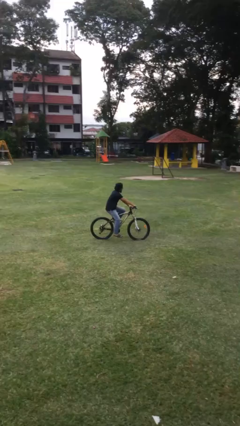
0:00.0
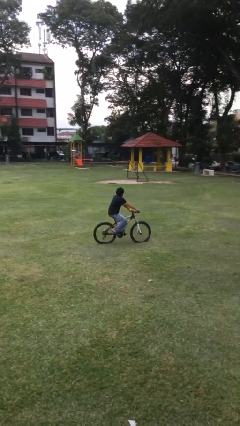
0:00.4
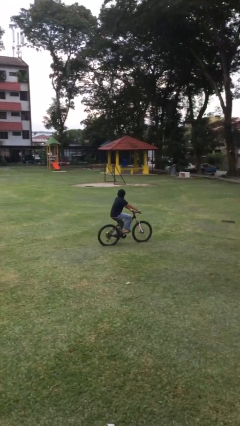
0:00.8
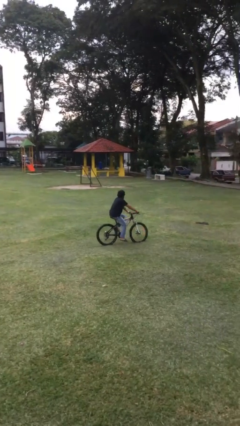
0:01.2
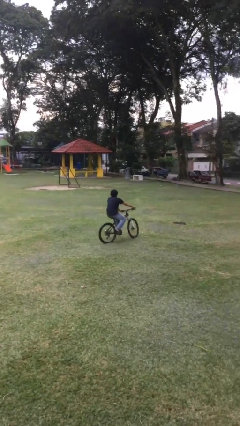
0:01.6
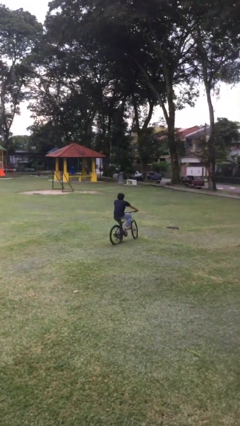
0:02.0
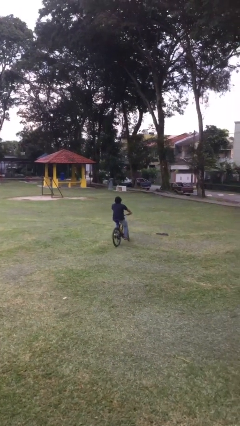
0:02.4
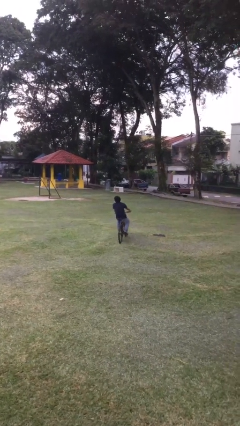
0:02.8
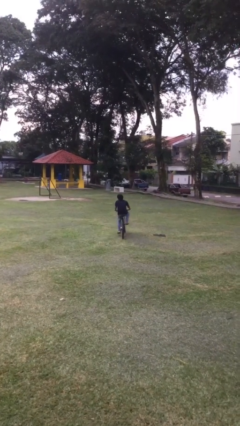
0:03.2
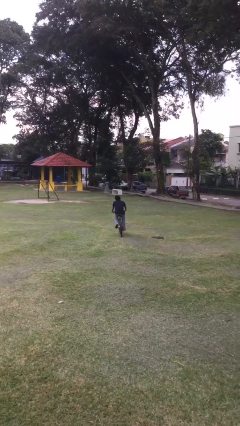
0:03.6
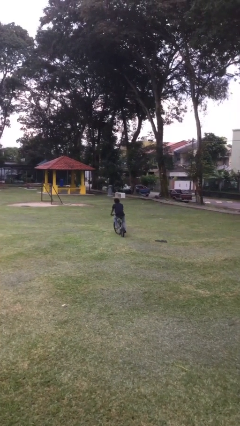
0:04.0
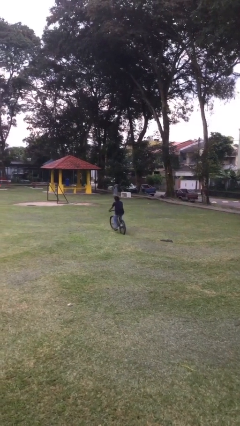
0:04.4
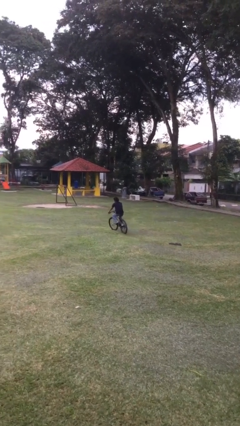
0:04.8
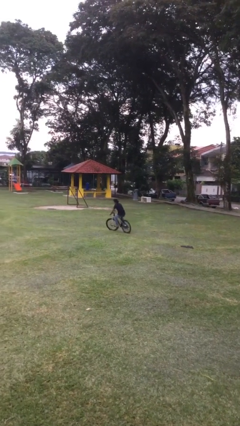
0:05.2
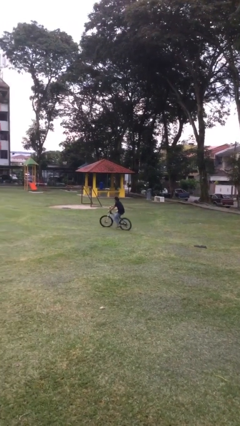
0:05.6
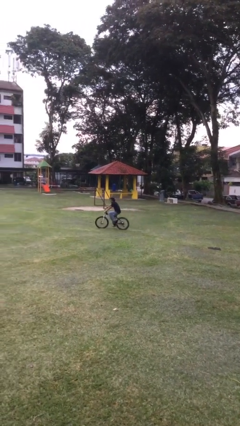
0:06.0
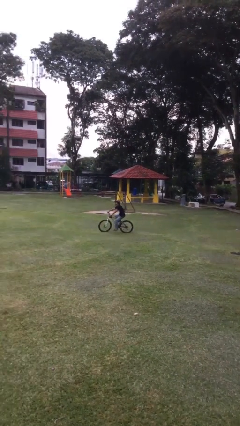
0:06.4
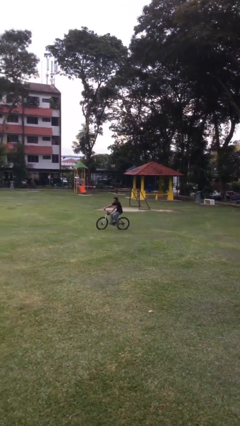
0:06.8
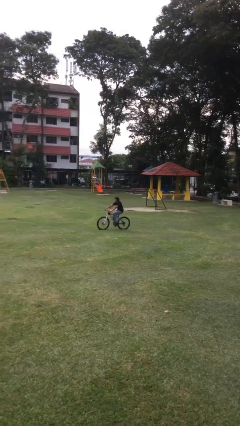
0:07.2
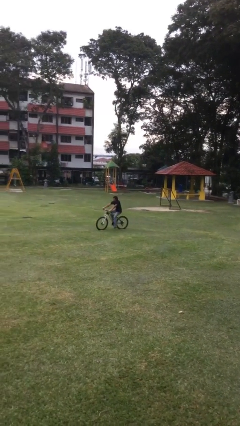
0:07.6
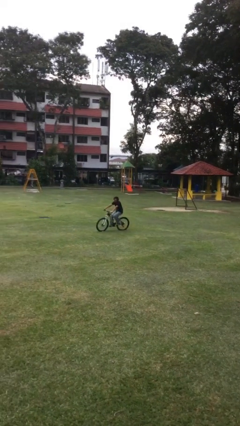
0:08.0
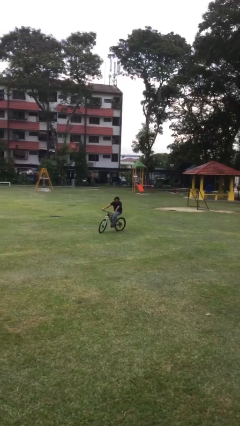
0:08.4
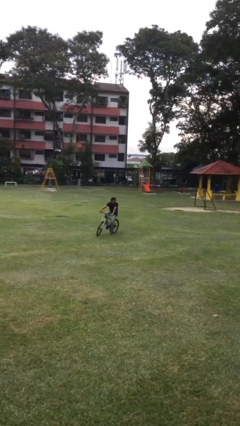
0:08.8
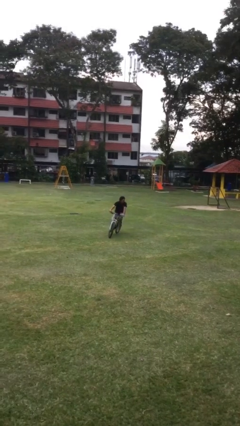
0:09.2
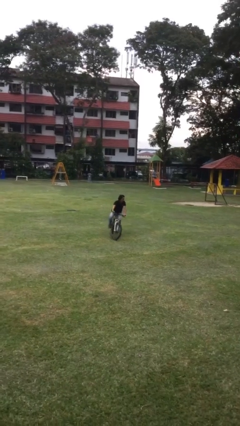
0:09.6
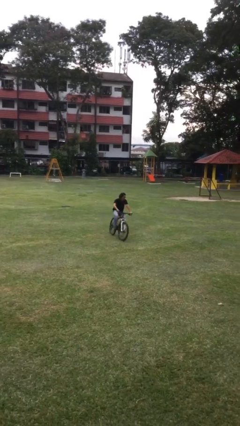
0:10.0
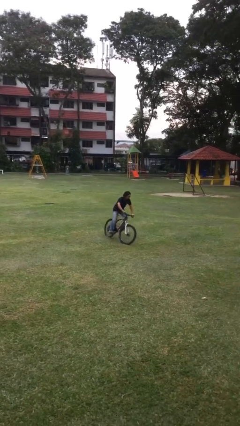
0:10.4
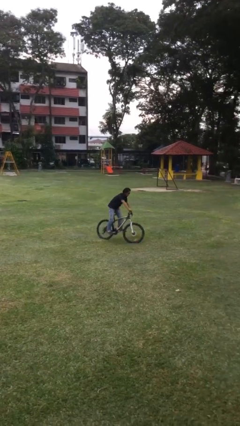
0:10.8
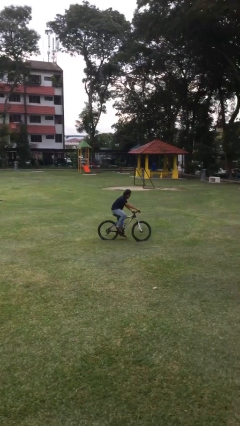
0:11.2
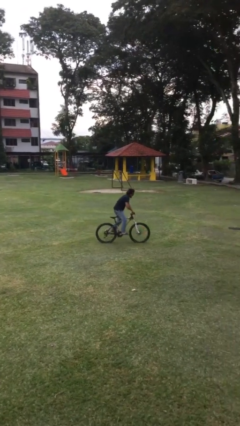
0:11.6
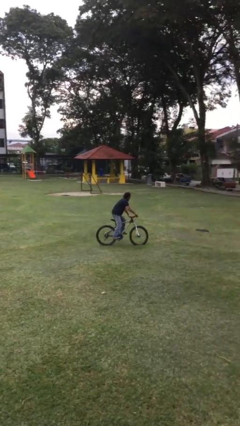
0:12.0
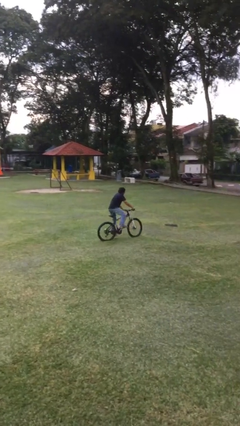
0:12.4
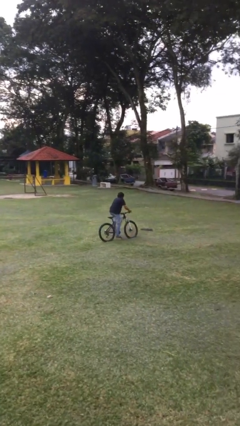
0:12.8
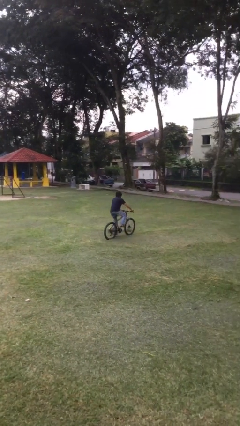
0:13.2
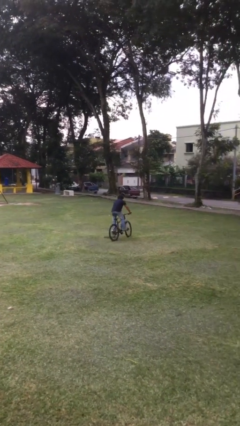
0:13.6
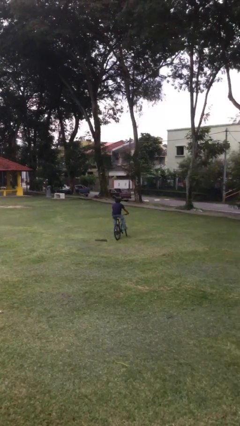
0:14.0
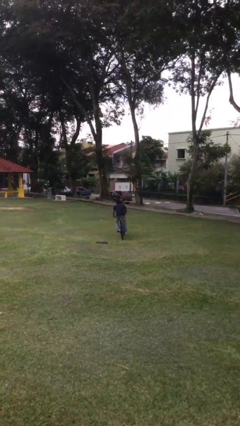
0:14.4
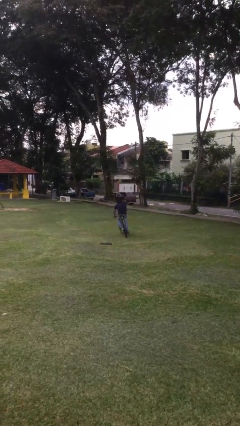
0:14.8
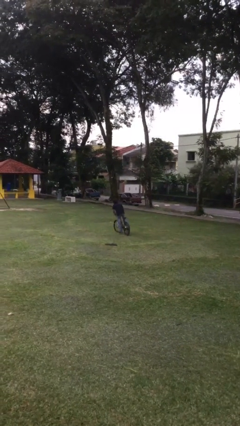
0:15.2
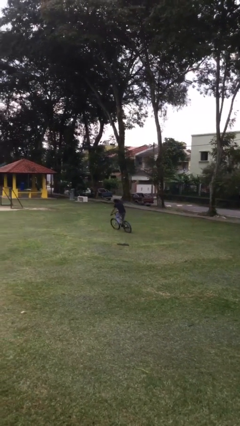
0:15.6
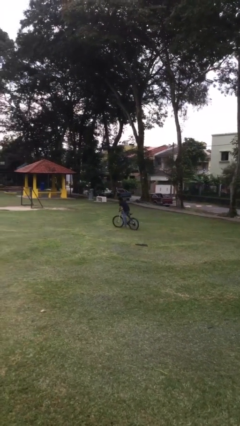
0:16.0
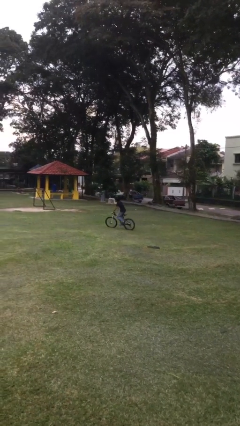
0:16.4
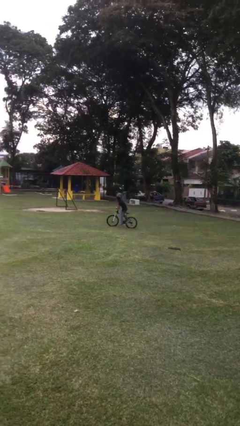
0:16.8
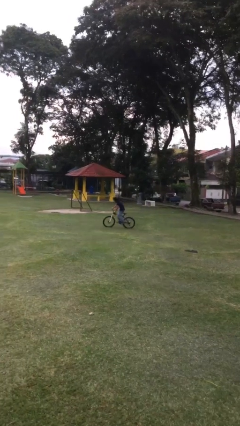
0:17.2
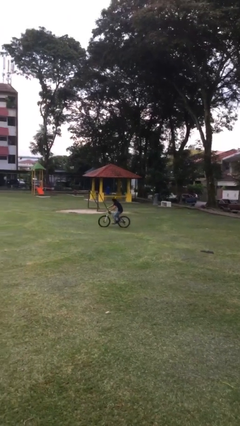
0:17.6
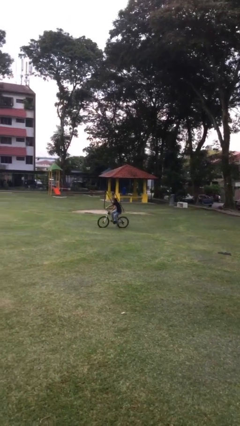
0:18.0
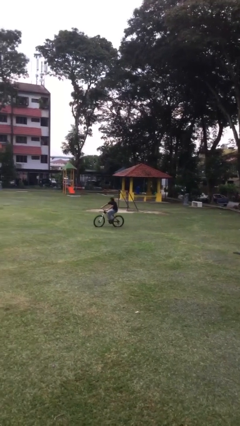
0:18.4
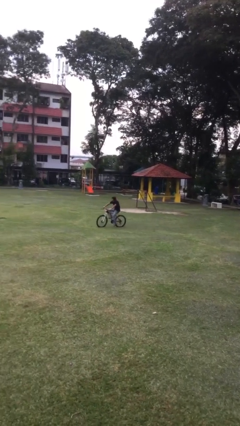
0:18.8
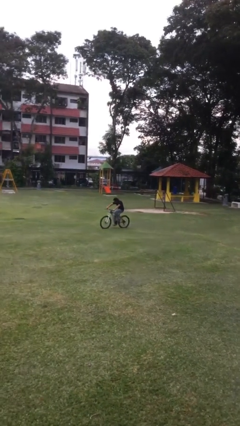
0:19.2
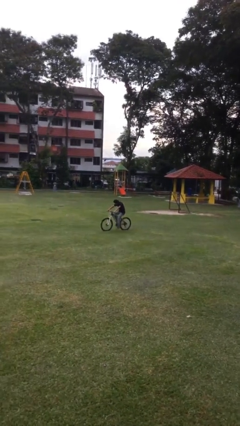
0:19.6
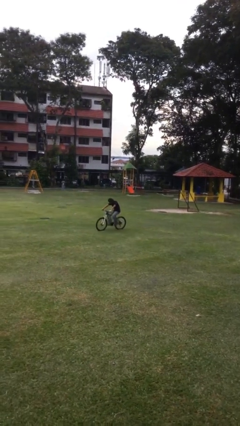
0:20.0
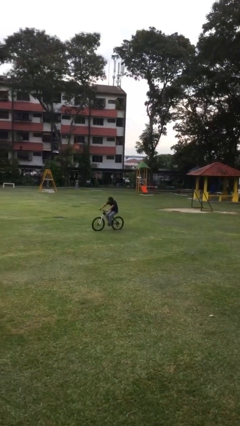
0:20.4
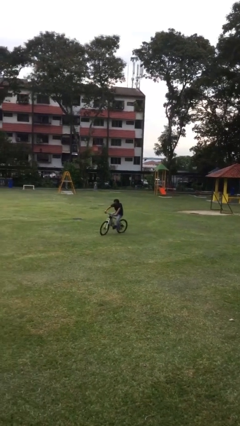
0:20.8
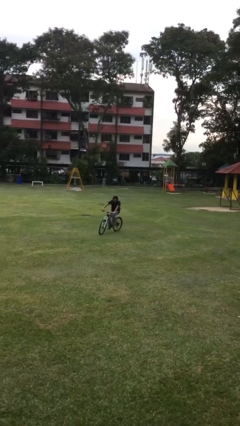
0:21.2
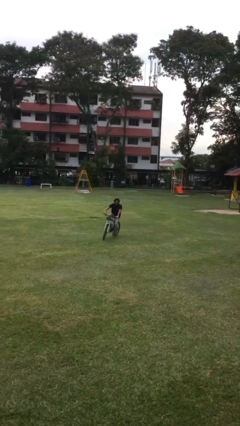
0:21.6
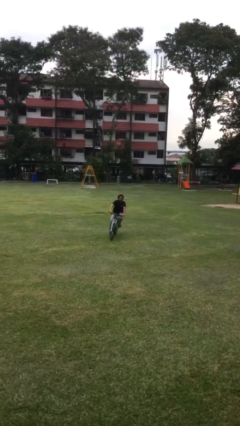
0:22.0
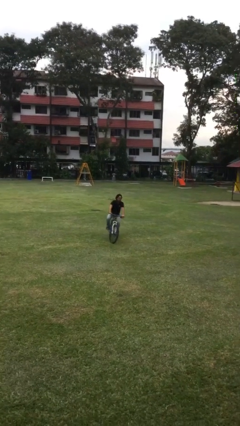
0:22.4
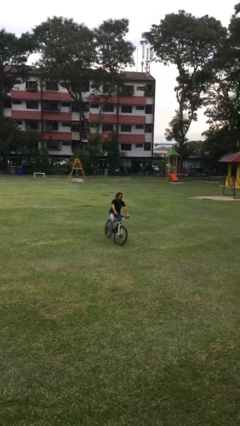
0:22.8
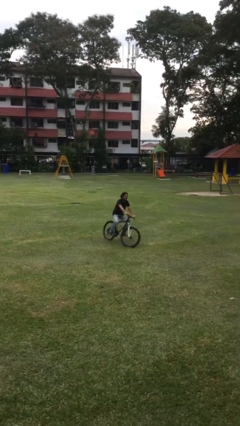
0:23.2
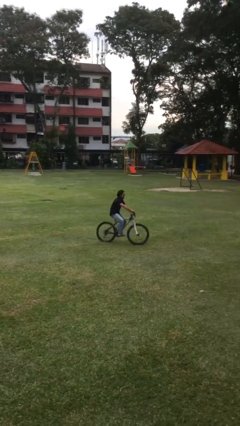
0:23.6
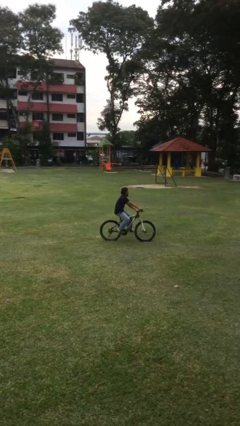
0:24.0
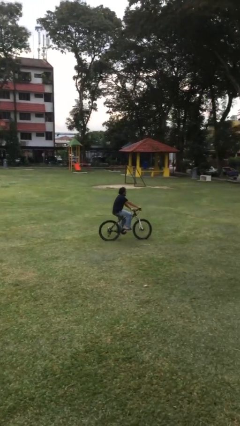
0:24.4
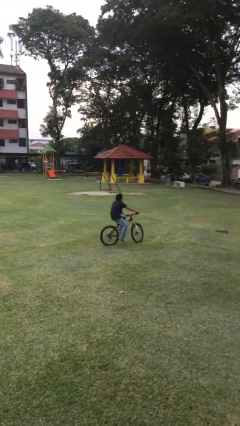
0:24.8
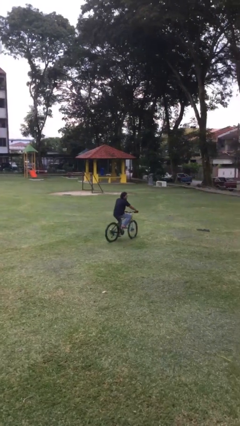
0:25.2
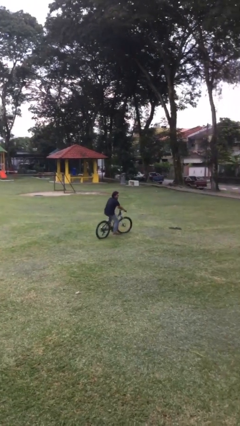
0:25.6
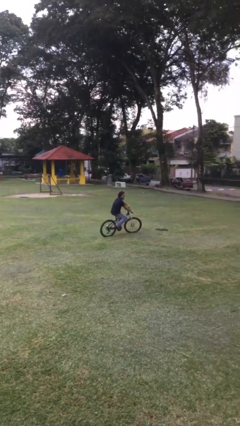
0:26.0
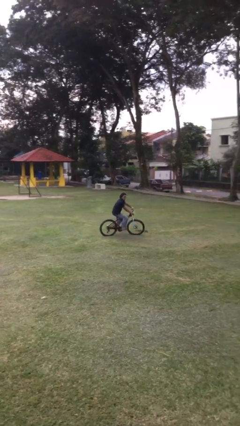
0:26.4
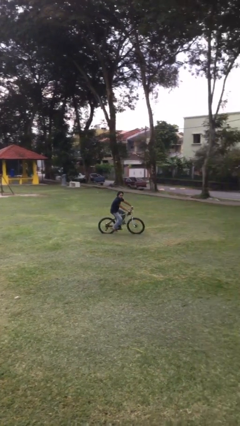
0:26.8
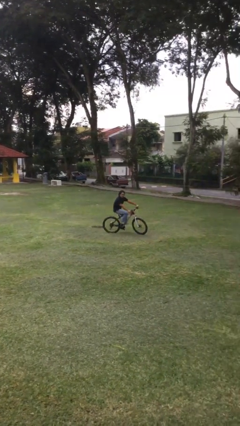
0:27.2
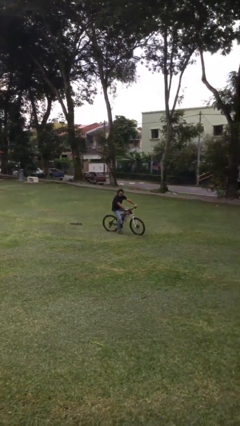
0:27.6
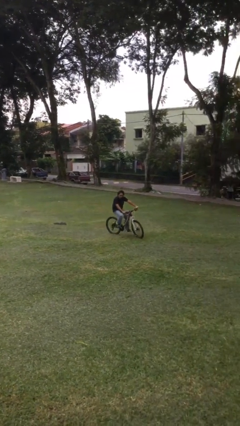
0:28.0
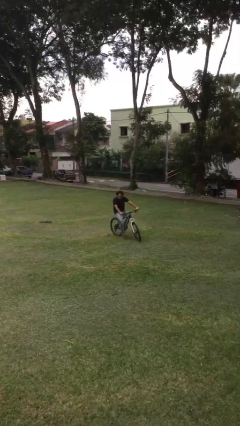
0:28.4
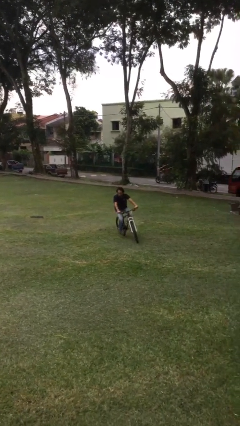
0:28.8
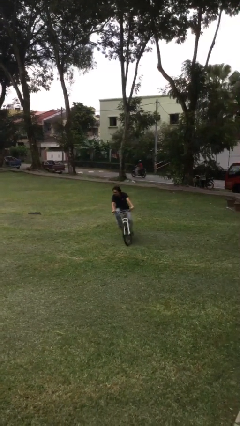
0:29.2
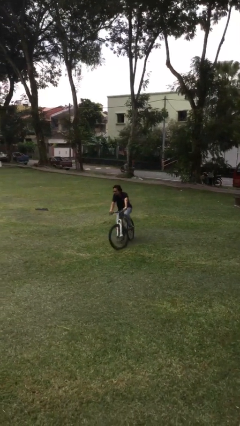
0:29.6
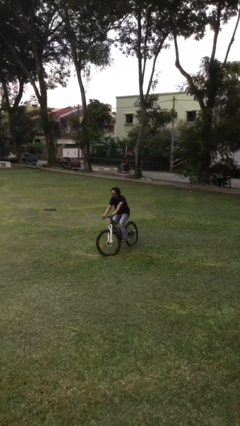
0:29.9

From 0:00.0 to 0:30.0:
person rides bicycle

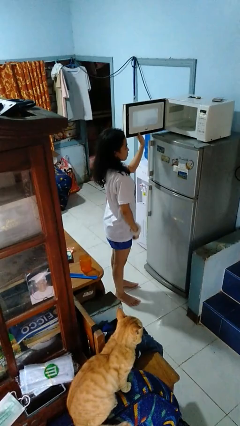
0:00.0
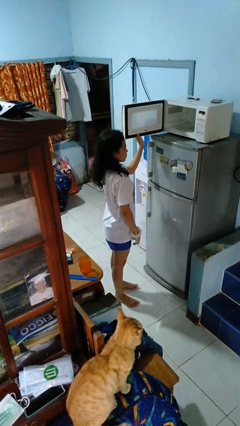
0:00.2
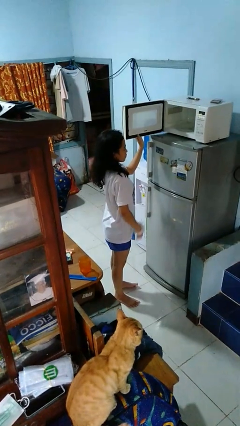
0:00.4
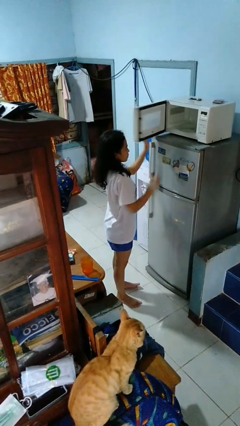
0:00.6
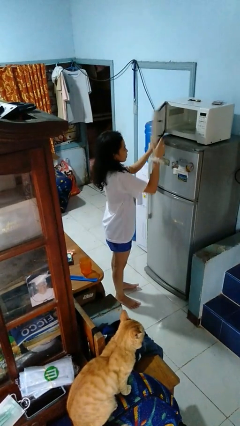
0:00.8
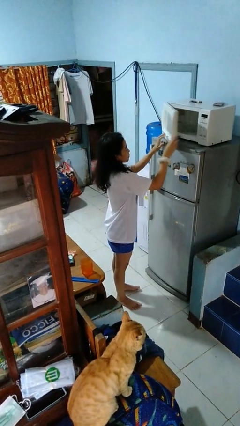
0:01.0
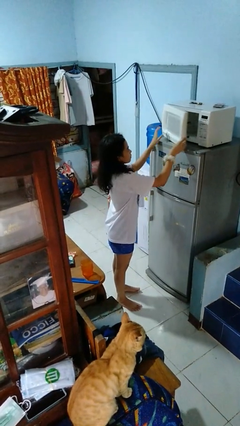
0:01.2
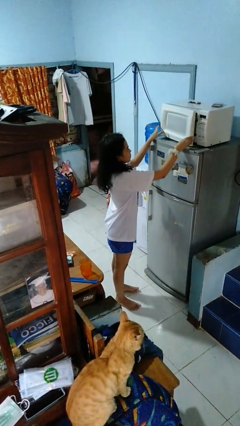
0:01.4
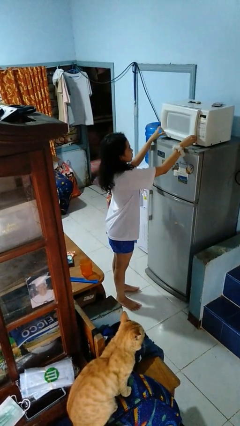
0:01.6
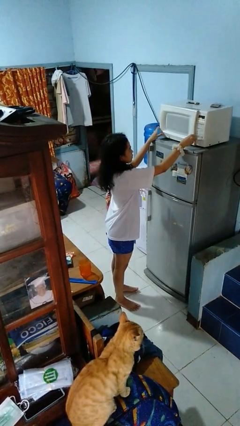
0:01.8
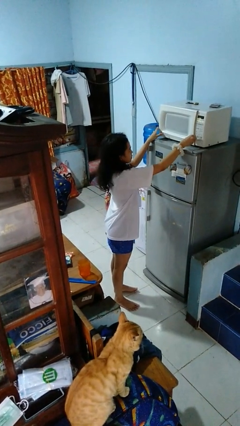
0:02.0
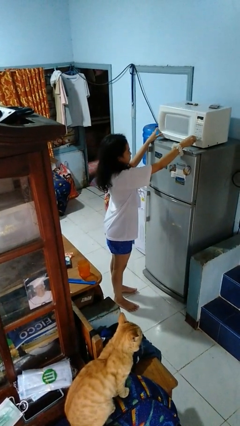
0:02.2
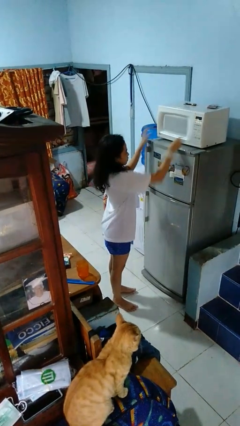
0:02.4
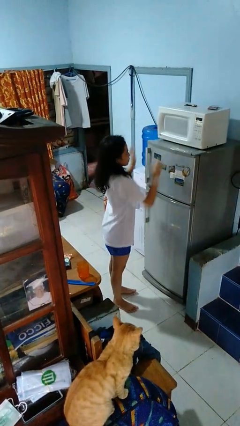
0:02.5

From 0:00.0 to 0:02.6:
person closes microwave

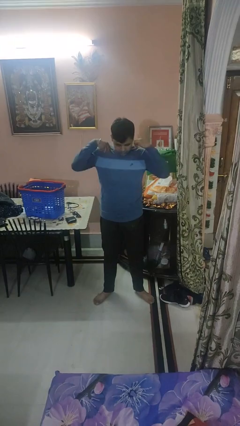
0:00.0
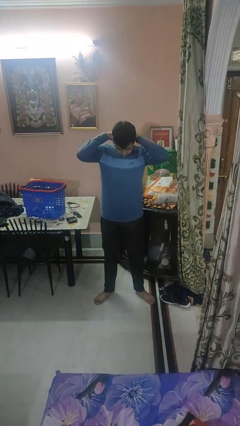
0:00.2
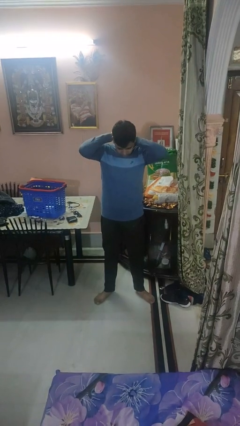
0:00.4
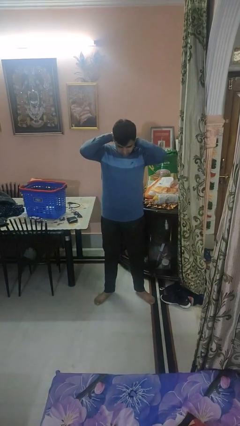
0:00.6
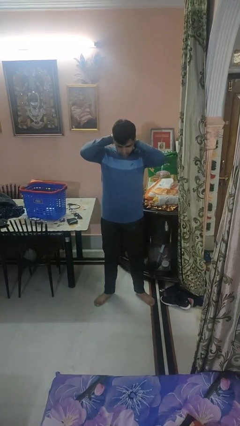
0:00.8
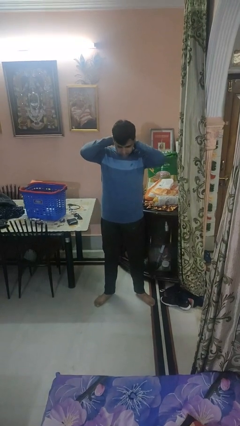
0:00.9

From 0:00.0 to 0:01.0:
person puts on necklace
